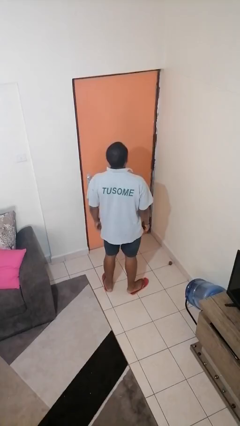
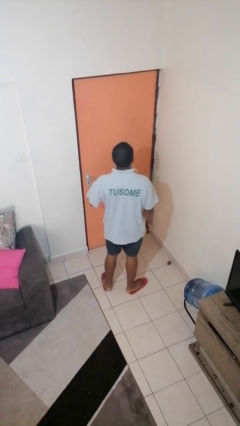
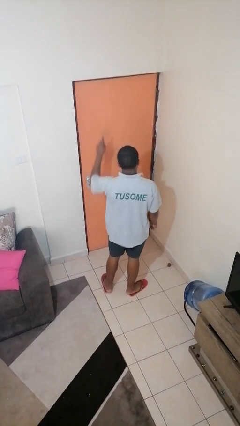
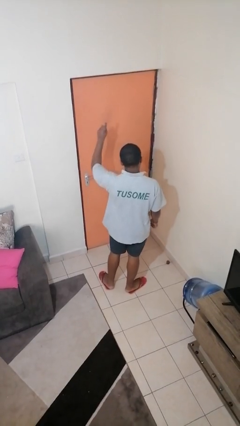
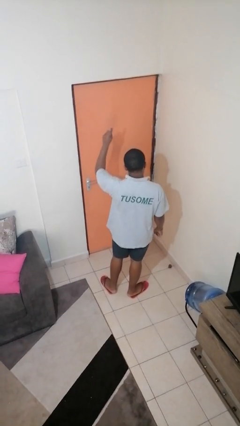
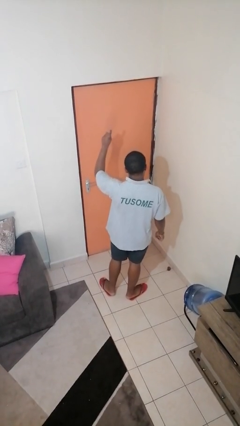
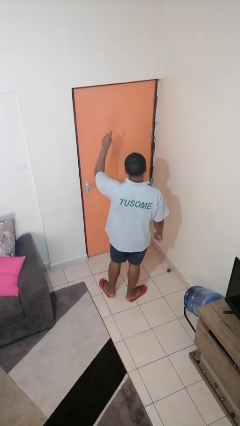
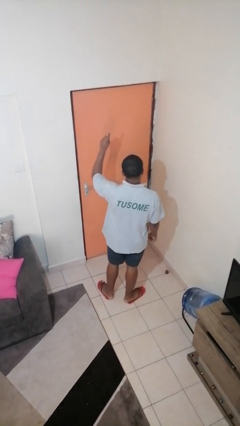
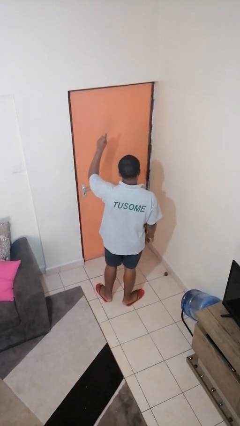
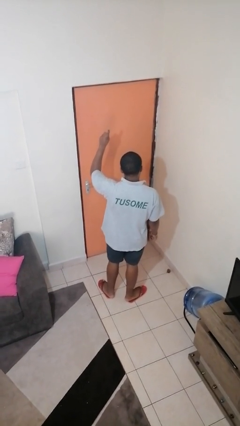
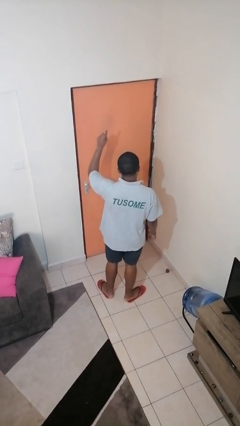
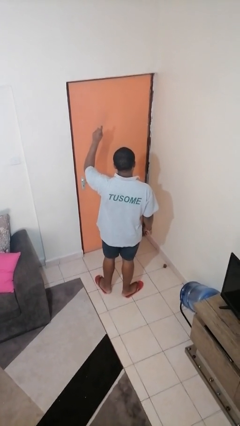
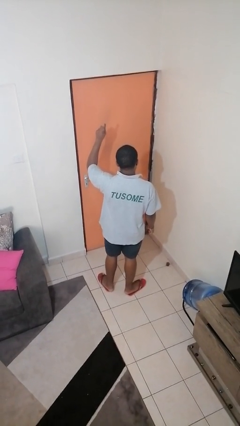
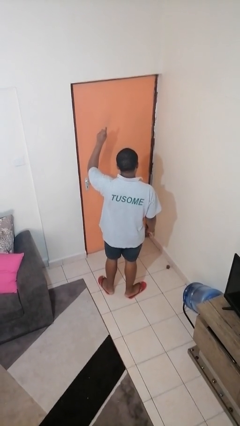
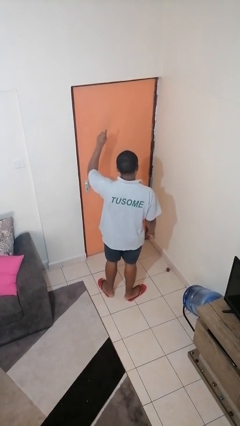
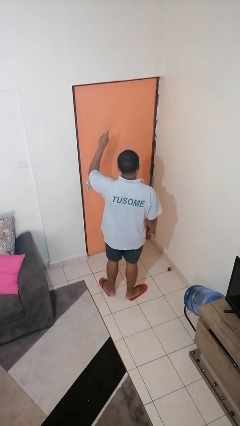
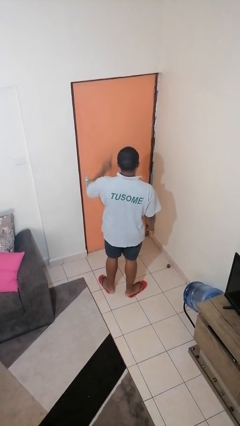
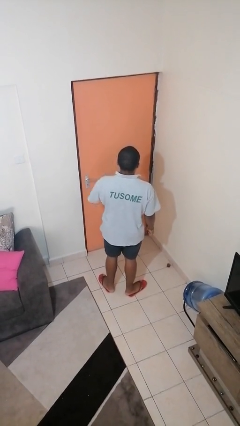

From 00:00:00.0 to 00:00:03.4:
person gestures number one

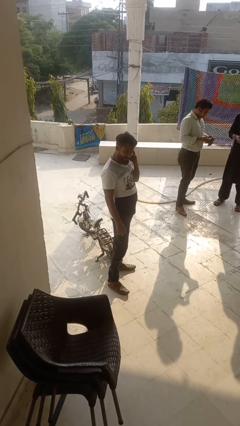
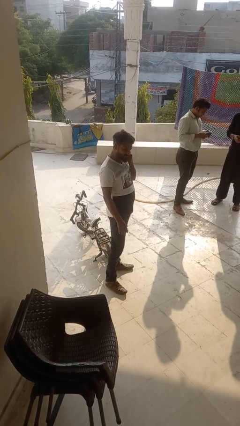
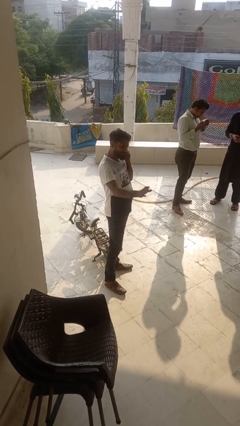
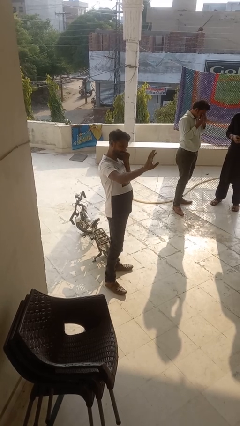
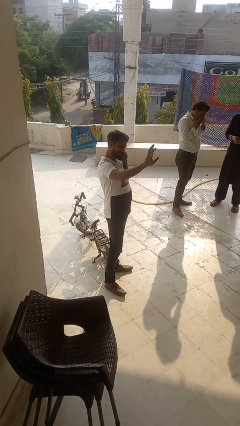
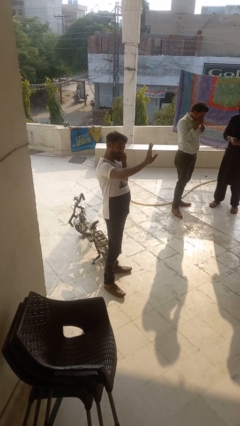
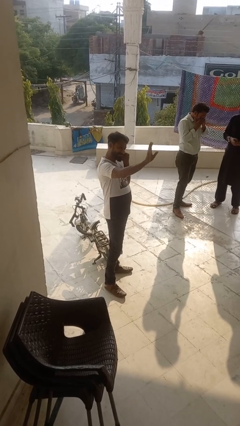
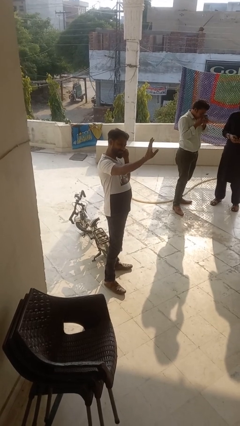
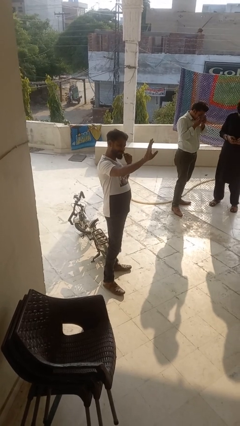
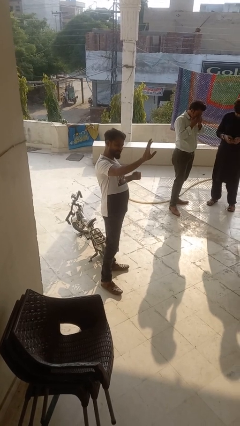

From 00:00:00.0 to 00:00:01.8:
person waves at person

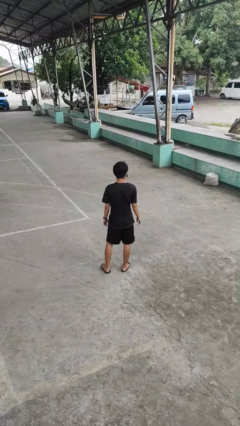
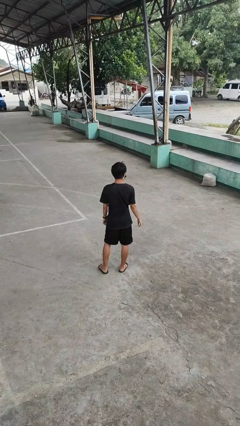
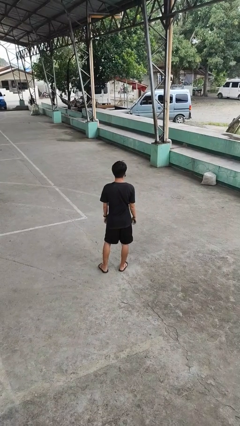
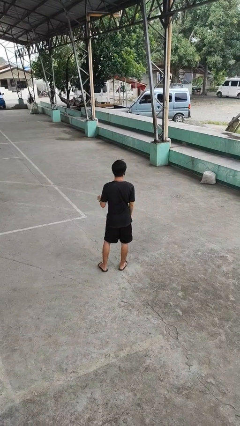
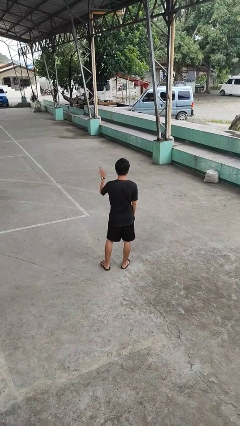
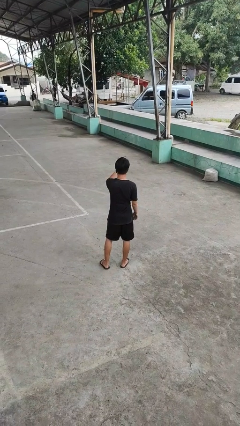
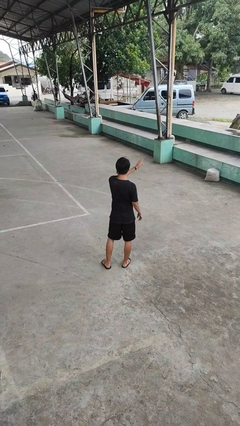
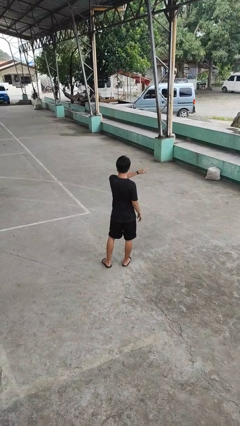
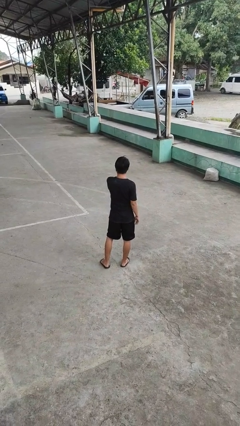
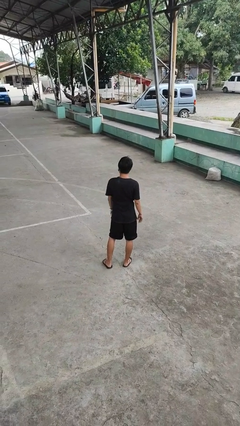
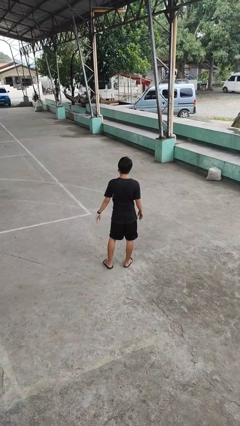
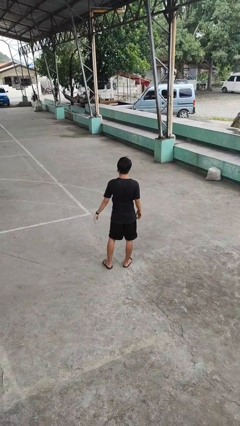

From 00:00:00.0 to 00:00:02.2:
person gestures swipe right

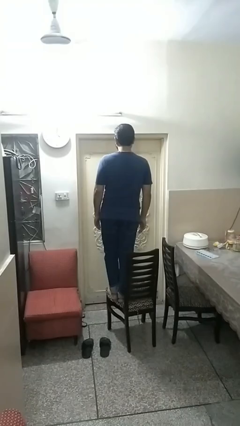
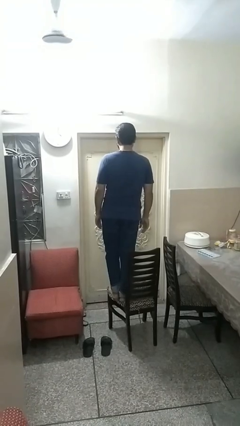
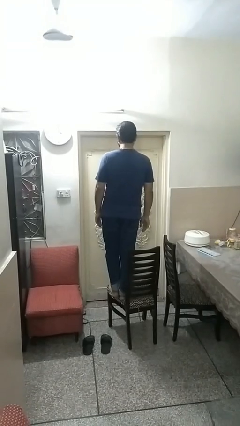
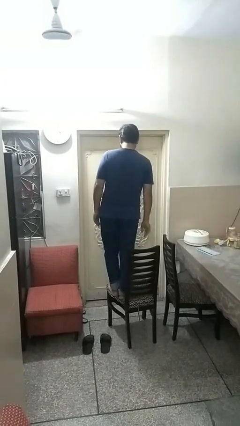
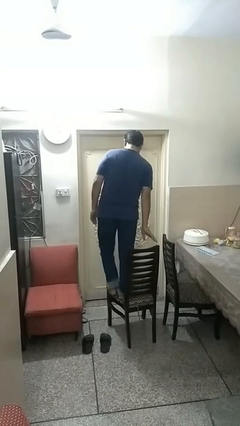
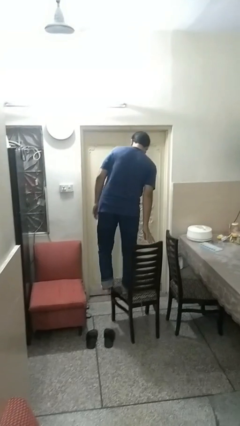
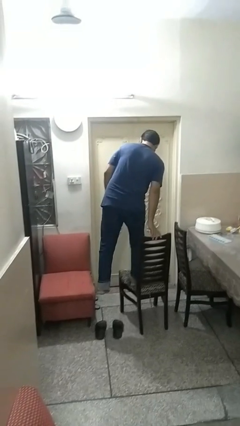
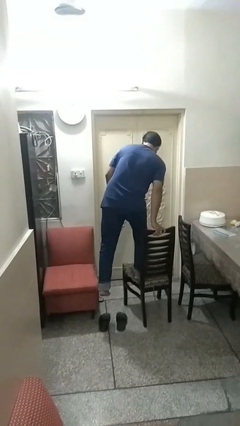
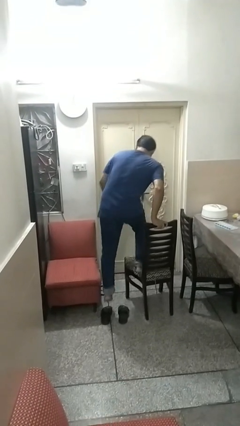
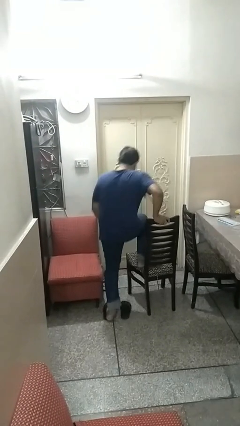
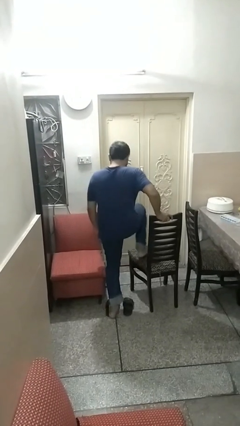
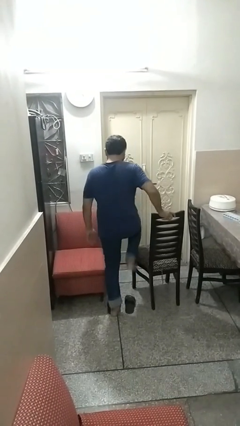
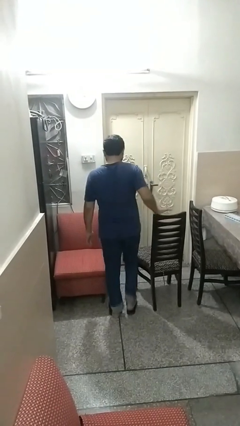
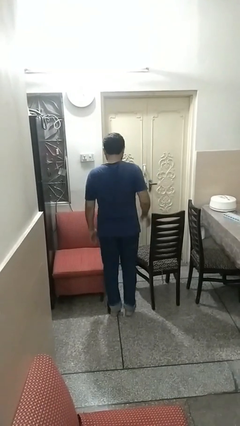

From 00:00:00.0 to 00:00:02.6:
person climbs off chair

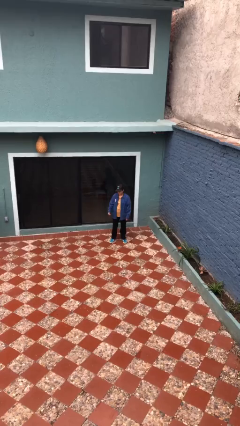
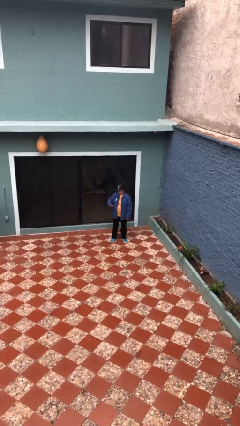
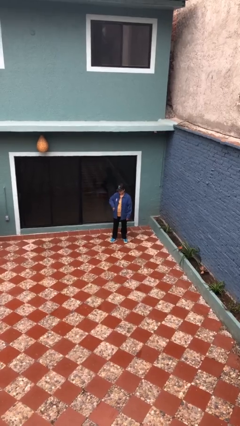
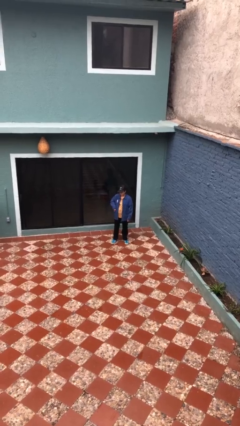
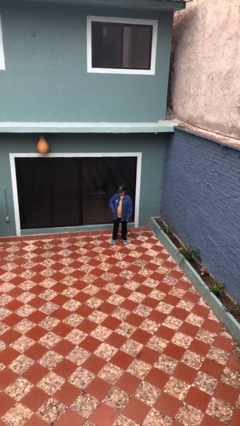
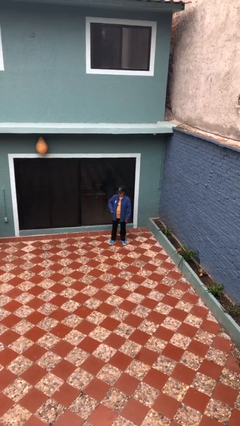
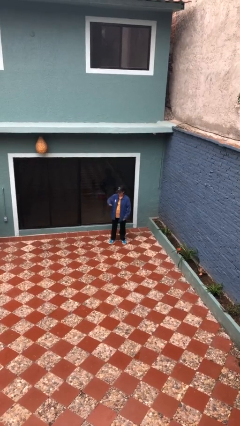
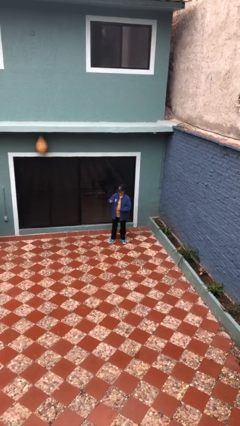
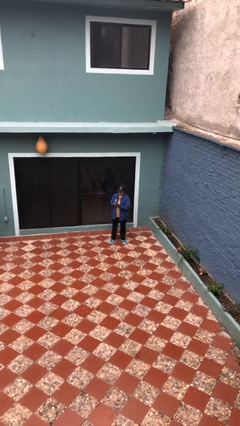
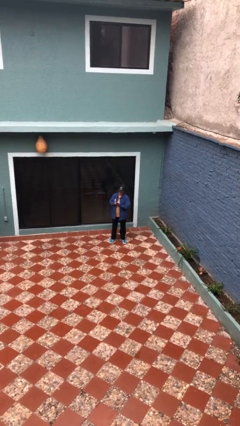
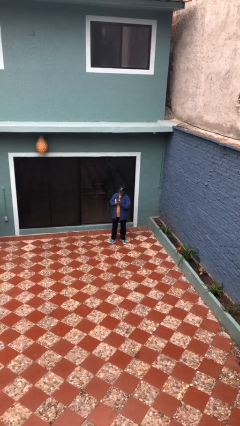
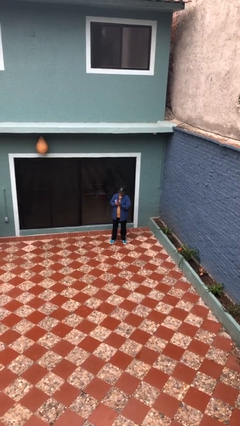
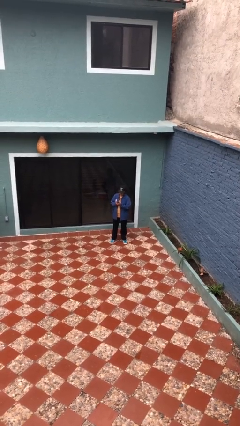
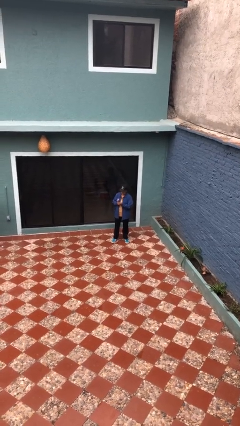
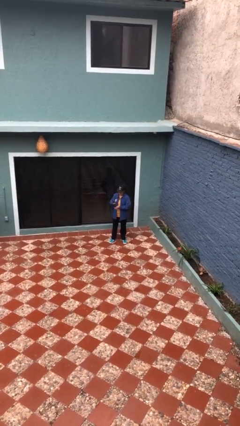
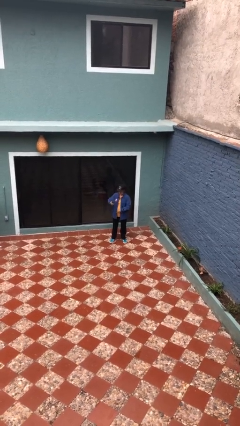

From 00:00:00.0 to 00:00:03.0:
person takes phone from pocket

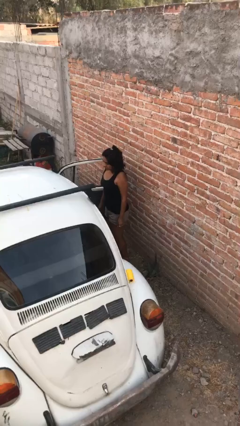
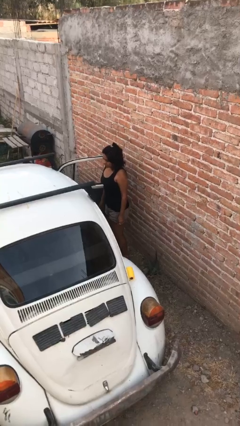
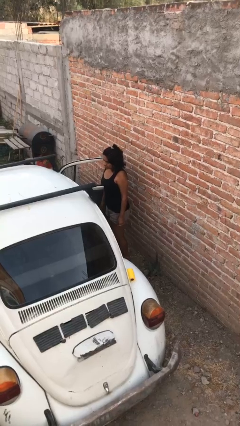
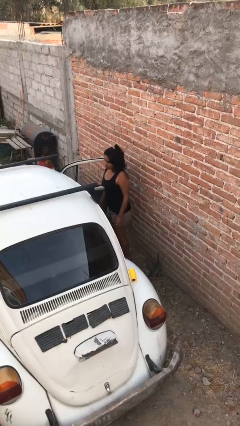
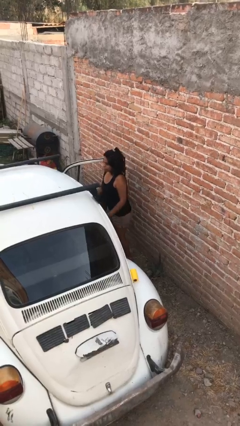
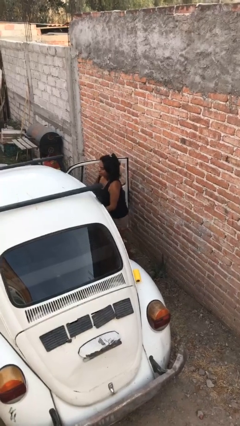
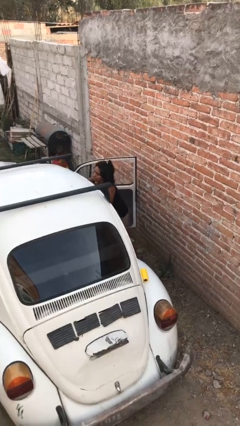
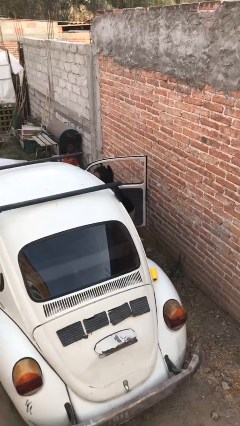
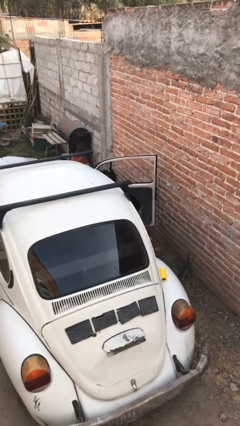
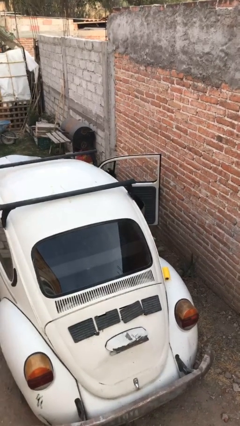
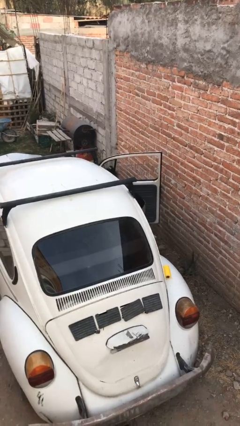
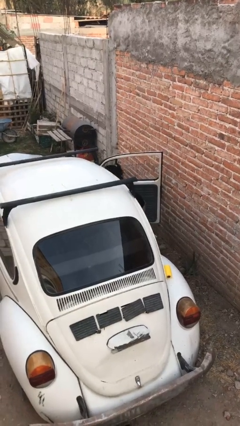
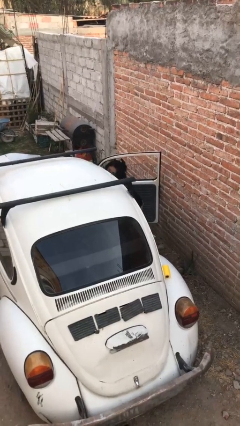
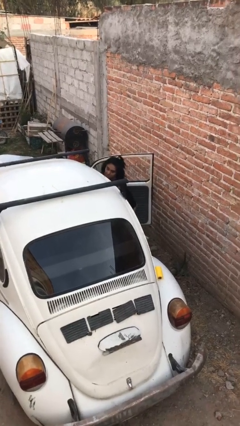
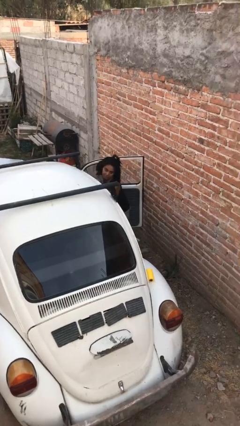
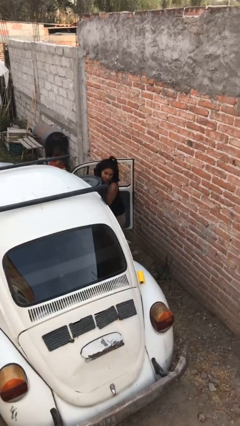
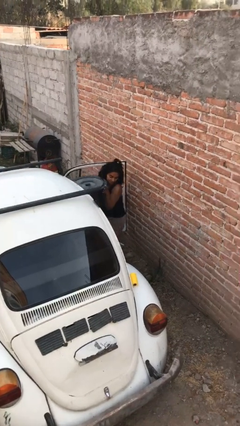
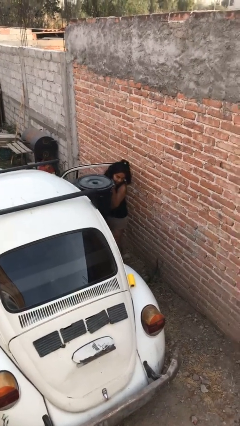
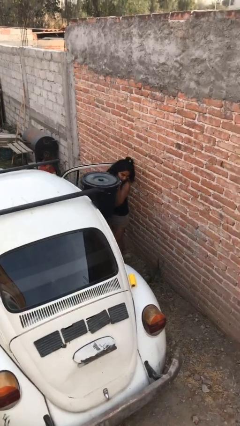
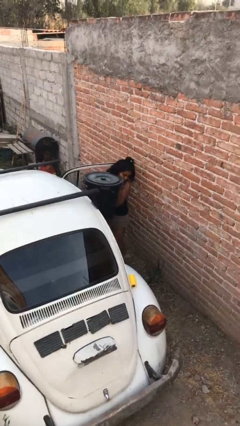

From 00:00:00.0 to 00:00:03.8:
person unloads car

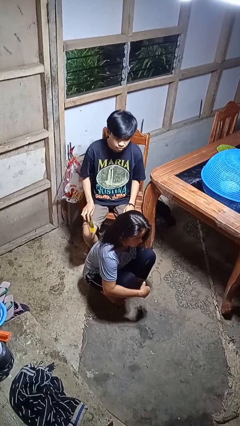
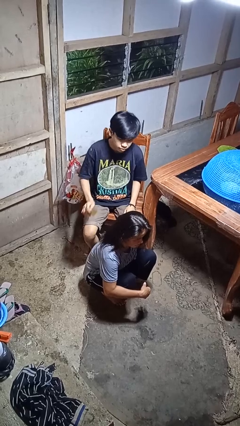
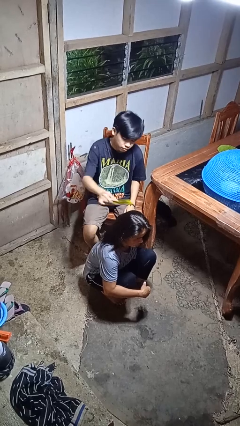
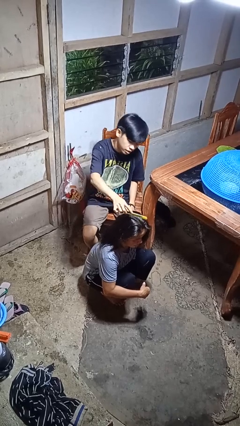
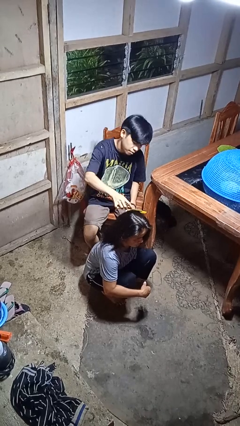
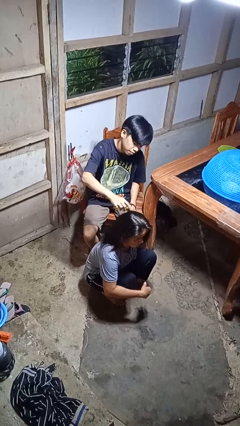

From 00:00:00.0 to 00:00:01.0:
person brushes hair of person
